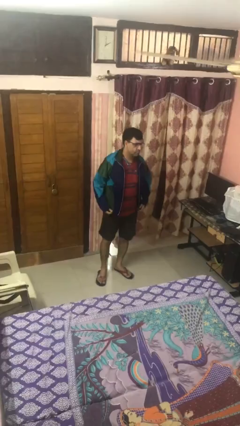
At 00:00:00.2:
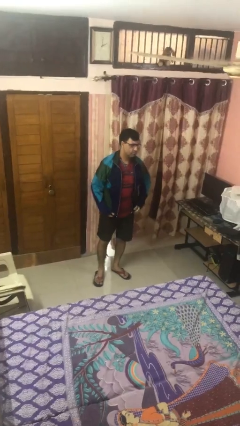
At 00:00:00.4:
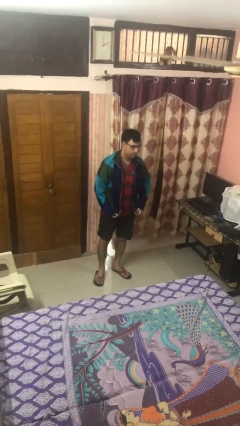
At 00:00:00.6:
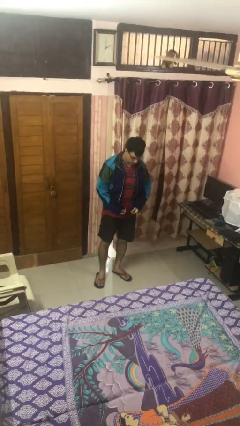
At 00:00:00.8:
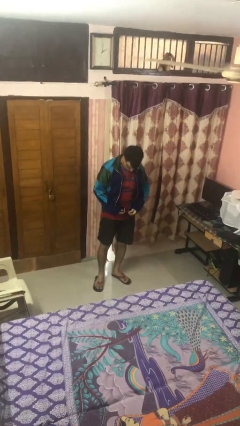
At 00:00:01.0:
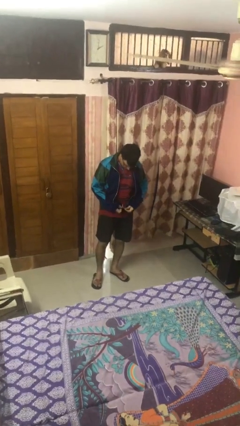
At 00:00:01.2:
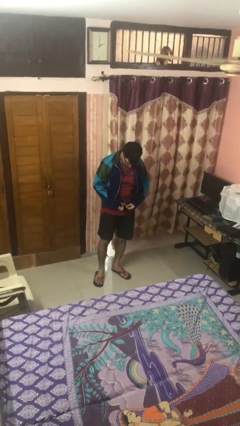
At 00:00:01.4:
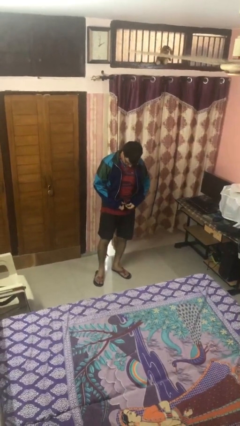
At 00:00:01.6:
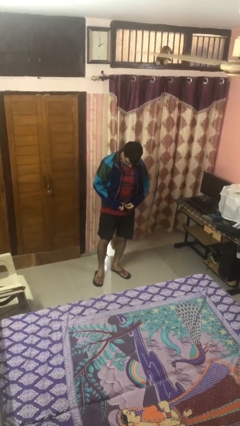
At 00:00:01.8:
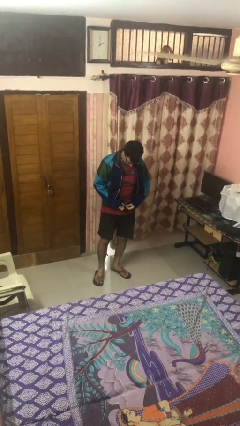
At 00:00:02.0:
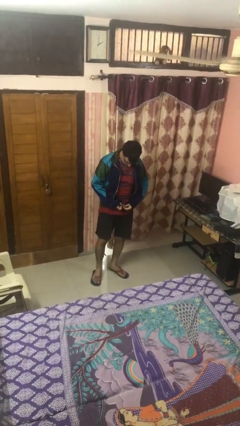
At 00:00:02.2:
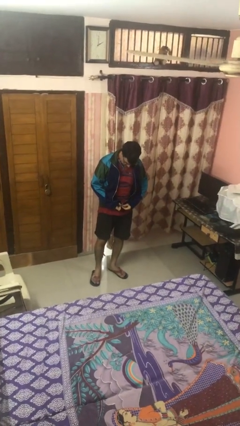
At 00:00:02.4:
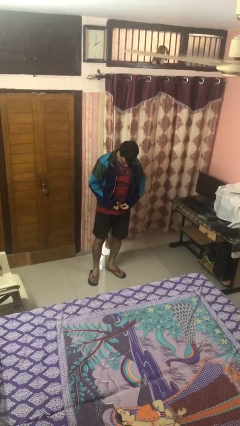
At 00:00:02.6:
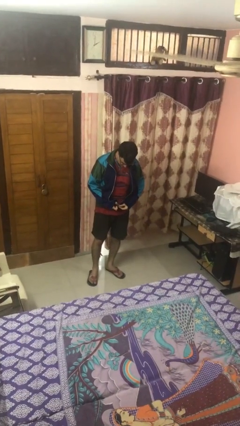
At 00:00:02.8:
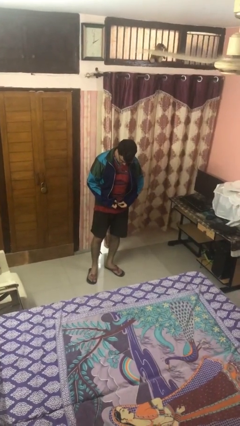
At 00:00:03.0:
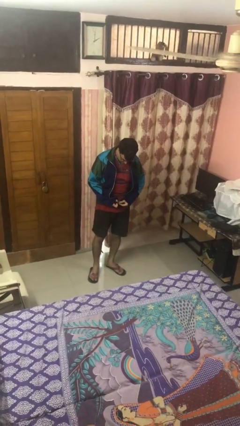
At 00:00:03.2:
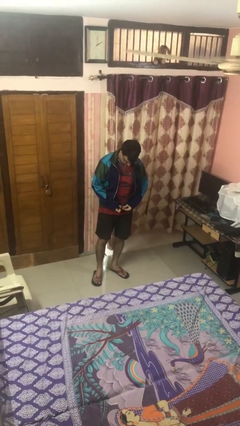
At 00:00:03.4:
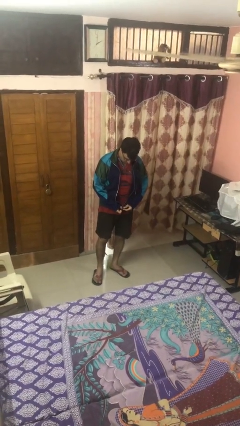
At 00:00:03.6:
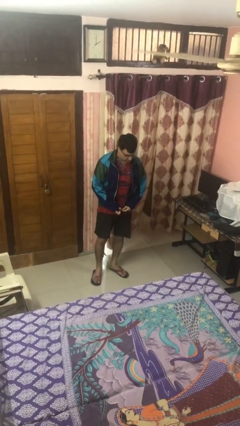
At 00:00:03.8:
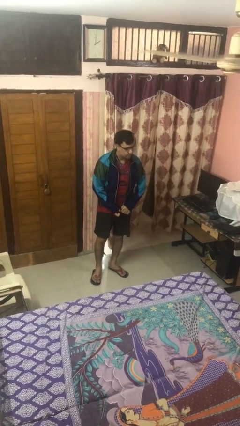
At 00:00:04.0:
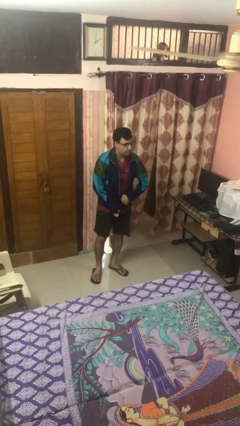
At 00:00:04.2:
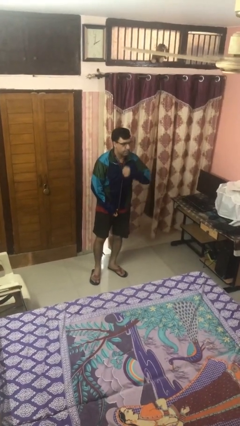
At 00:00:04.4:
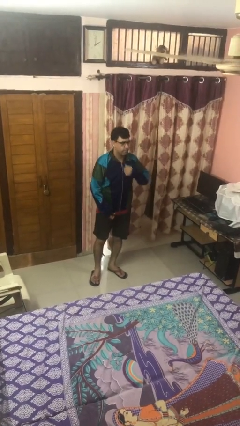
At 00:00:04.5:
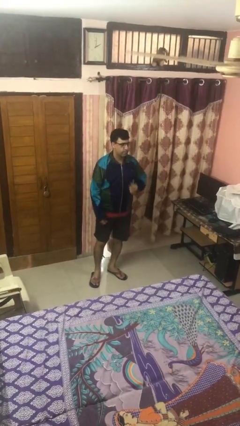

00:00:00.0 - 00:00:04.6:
person zips up jacket

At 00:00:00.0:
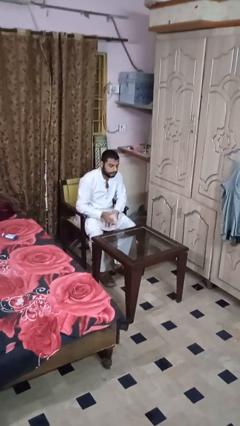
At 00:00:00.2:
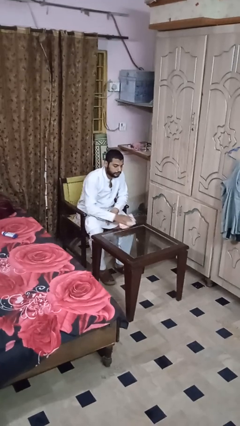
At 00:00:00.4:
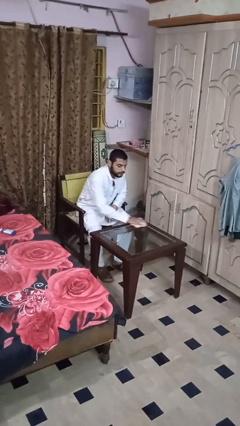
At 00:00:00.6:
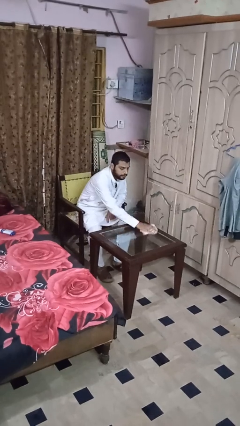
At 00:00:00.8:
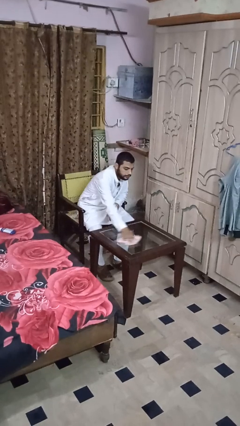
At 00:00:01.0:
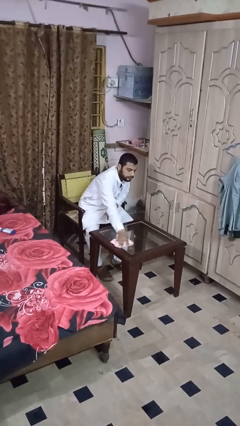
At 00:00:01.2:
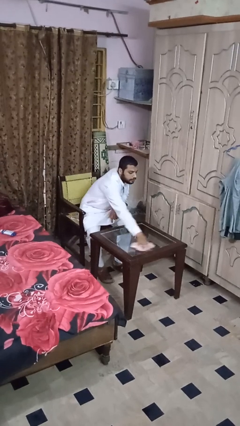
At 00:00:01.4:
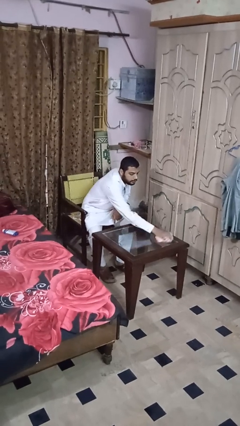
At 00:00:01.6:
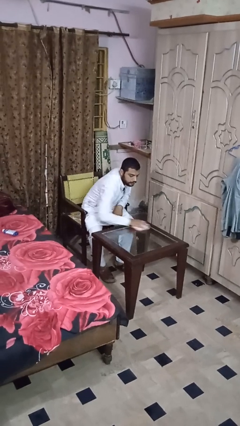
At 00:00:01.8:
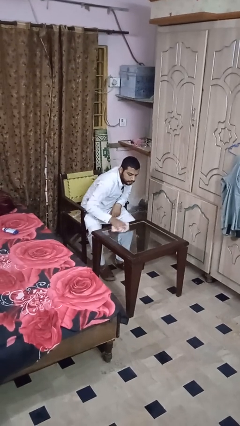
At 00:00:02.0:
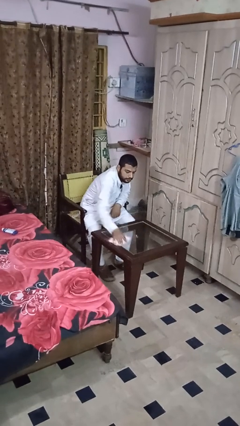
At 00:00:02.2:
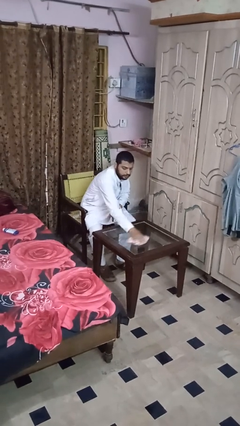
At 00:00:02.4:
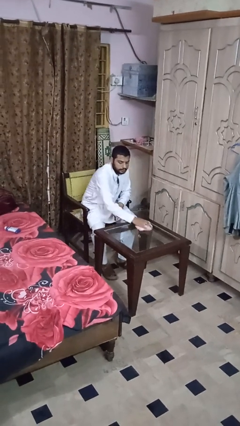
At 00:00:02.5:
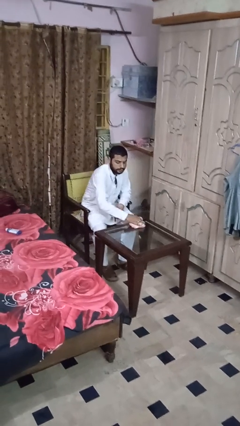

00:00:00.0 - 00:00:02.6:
person cleans table with rag

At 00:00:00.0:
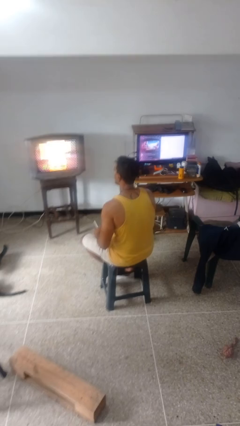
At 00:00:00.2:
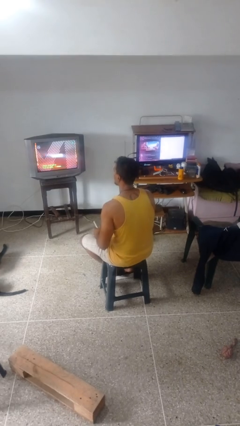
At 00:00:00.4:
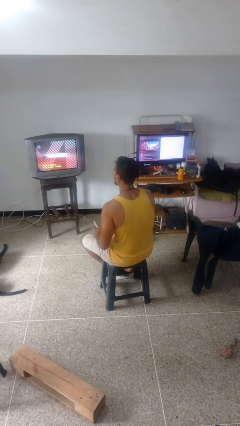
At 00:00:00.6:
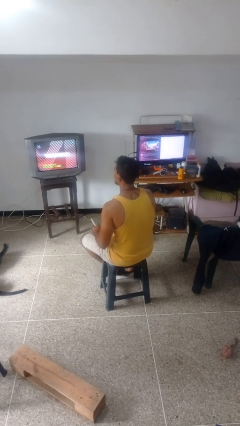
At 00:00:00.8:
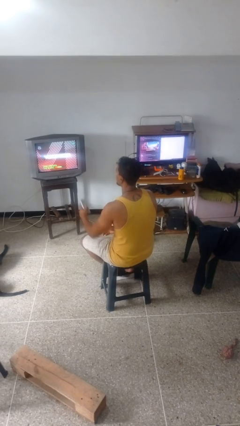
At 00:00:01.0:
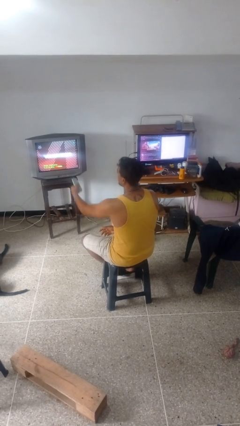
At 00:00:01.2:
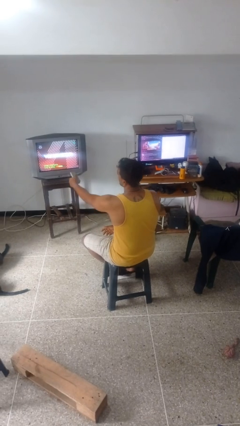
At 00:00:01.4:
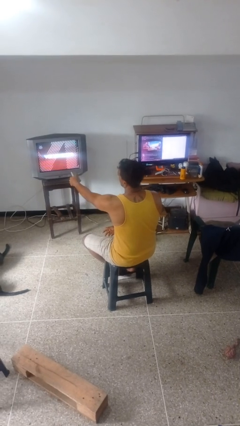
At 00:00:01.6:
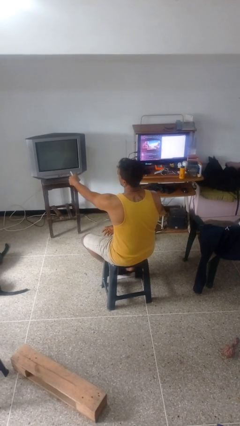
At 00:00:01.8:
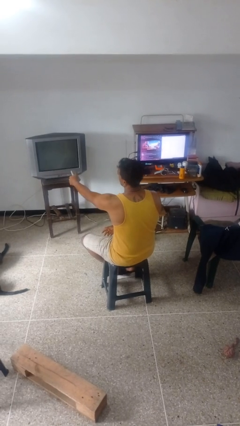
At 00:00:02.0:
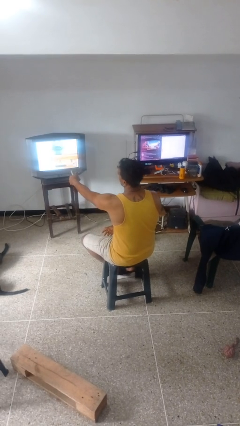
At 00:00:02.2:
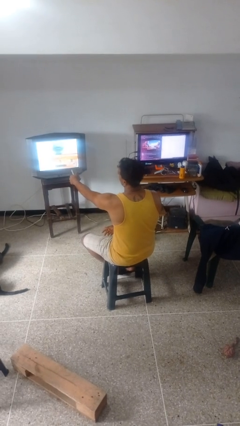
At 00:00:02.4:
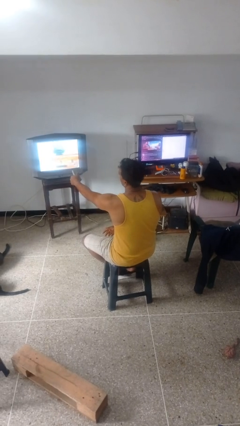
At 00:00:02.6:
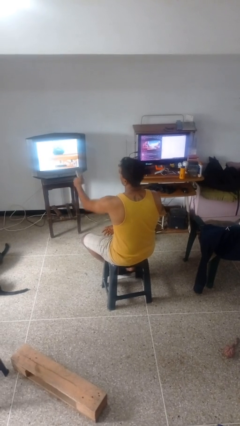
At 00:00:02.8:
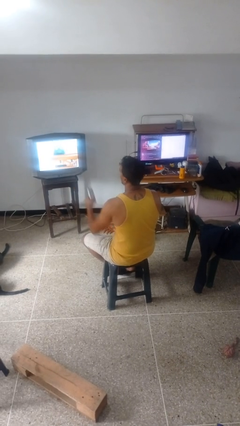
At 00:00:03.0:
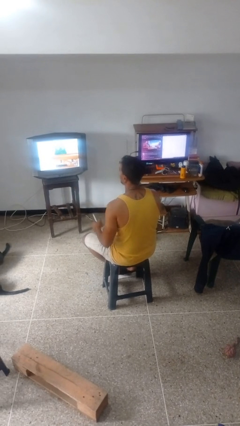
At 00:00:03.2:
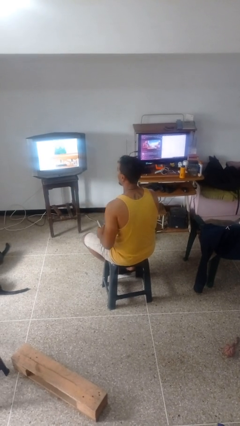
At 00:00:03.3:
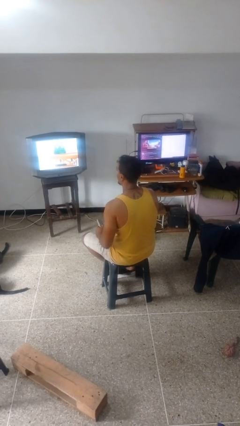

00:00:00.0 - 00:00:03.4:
person uses television remote

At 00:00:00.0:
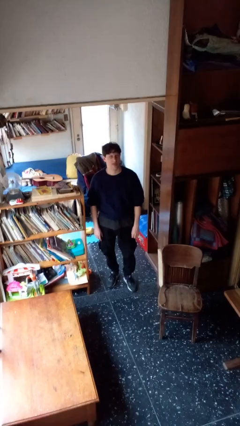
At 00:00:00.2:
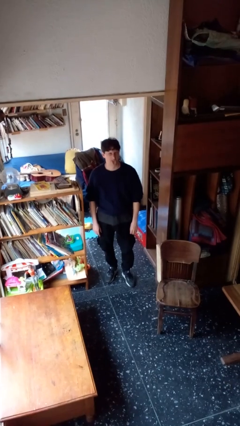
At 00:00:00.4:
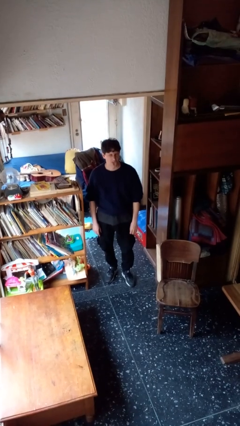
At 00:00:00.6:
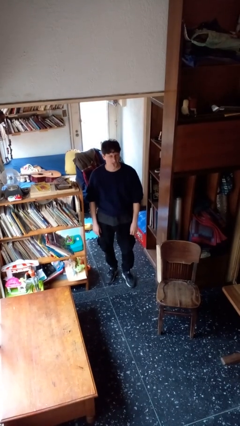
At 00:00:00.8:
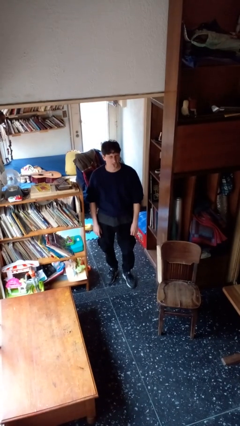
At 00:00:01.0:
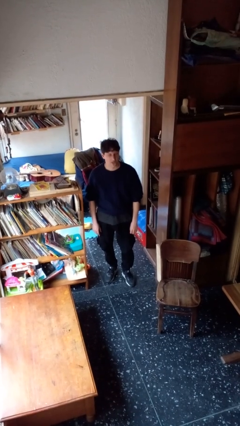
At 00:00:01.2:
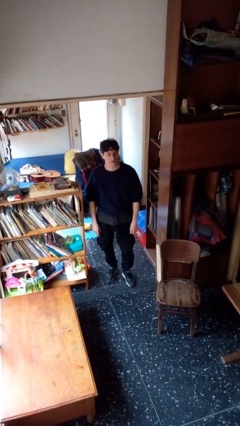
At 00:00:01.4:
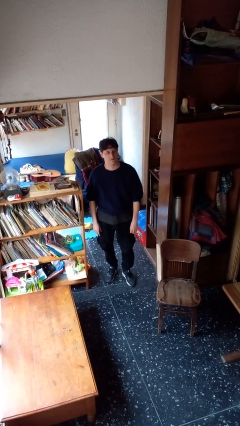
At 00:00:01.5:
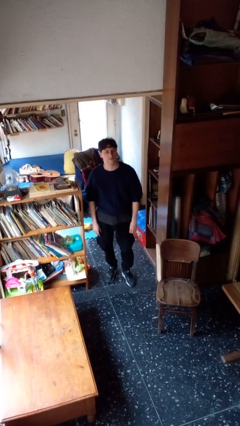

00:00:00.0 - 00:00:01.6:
person sticks out tongue

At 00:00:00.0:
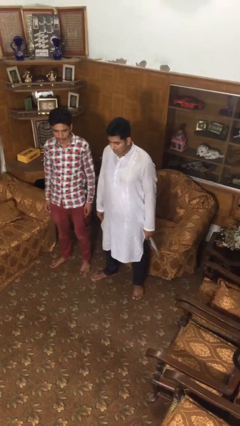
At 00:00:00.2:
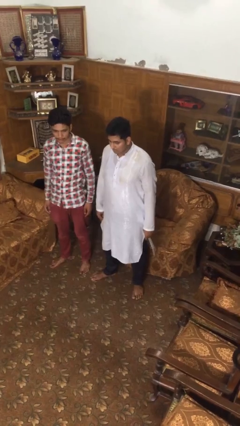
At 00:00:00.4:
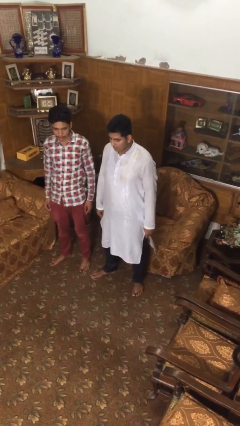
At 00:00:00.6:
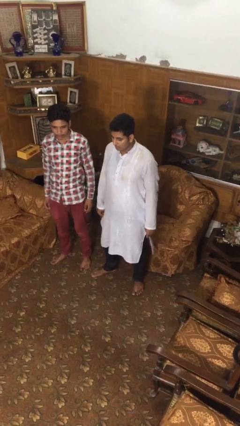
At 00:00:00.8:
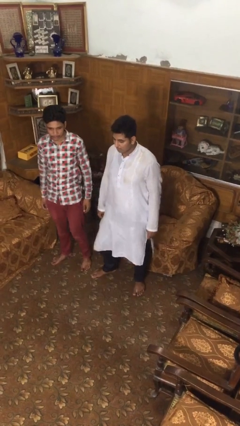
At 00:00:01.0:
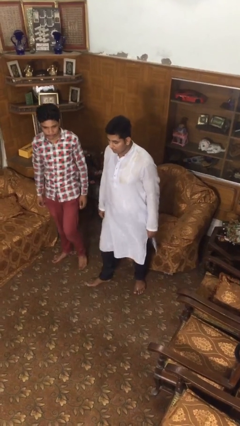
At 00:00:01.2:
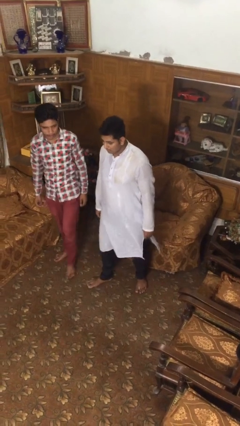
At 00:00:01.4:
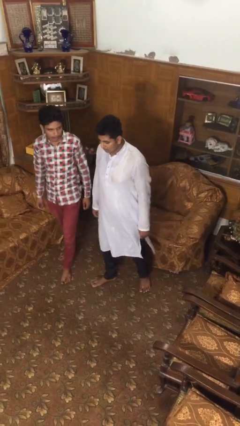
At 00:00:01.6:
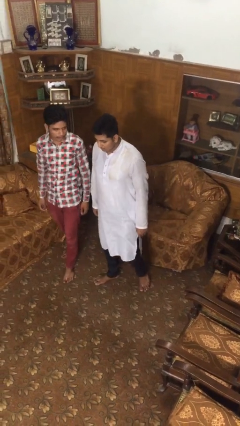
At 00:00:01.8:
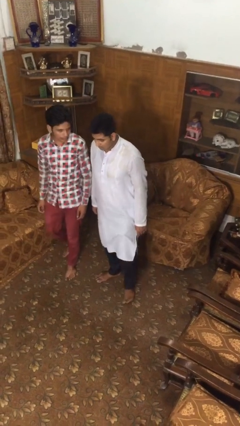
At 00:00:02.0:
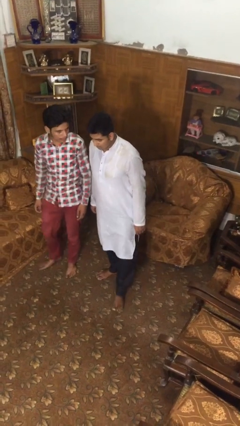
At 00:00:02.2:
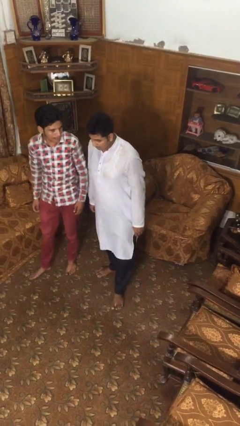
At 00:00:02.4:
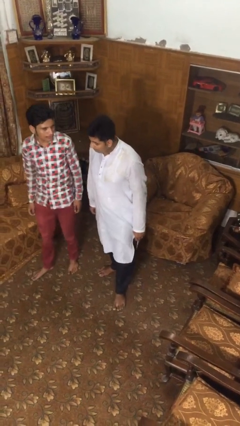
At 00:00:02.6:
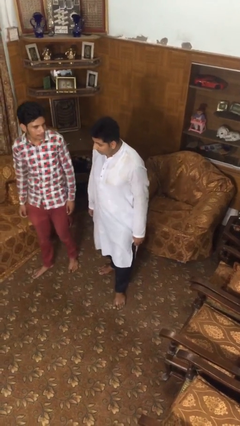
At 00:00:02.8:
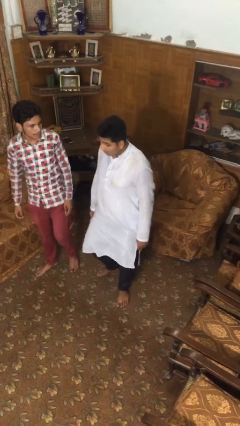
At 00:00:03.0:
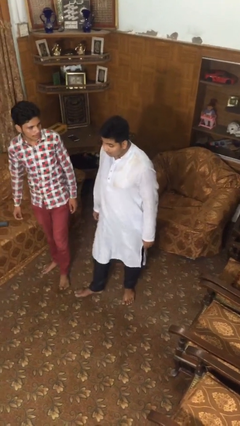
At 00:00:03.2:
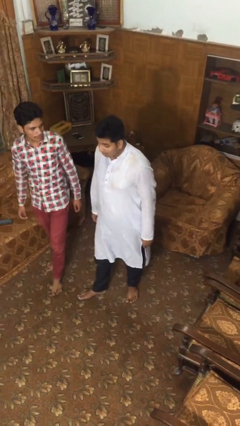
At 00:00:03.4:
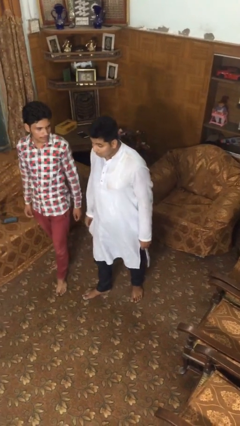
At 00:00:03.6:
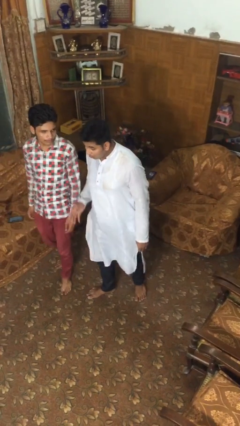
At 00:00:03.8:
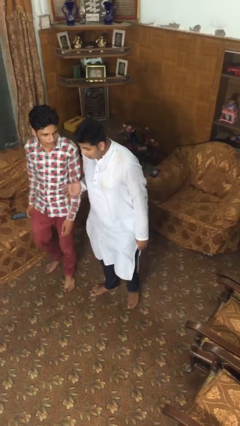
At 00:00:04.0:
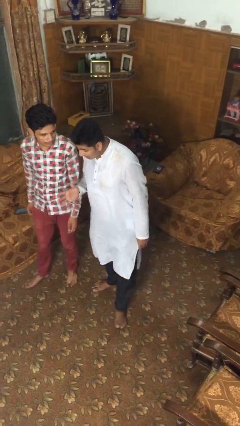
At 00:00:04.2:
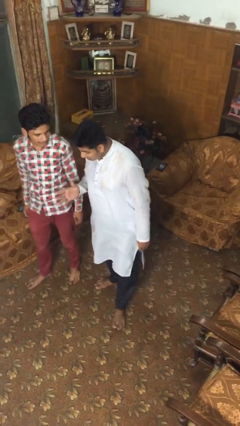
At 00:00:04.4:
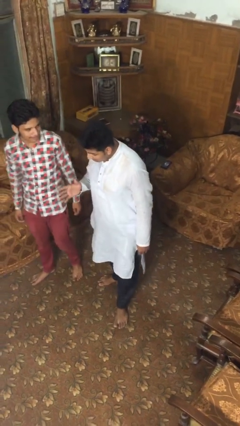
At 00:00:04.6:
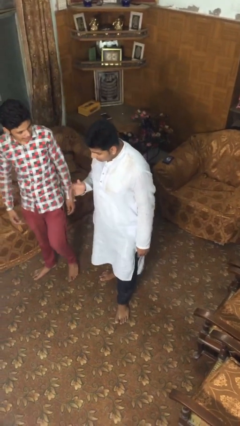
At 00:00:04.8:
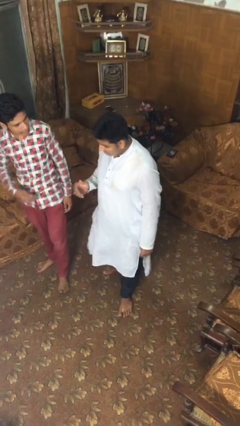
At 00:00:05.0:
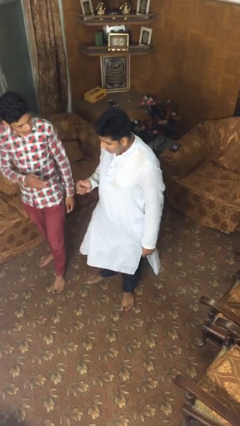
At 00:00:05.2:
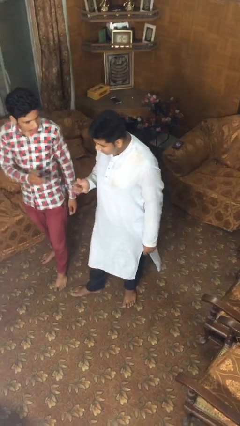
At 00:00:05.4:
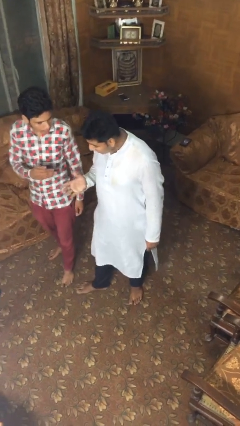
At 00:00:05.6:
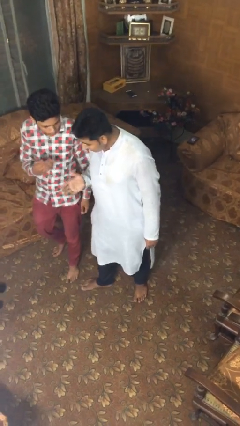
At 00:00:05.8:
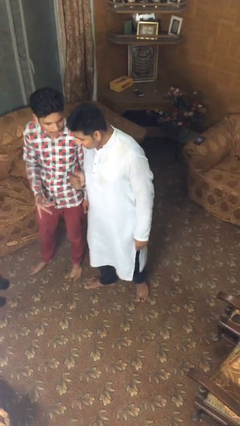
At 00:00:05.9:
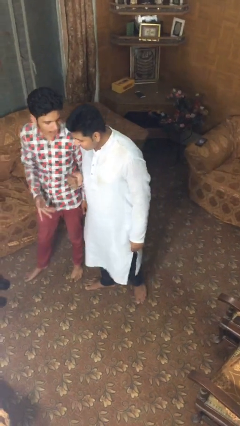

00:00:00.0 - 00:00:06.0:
person talks to person
